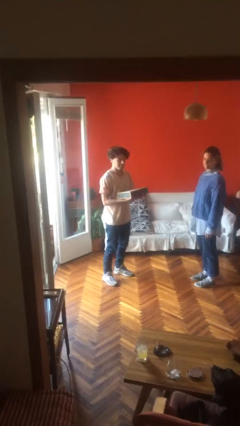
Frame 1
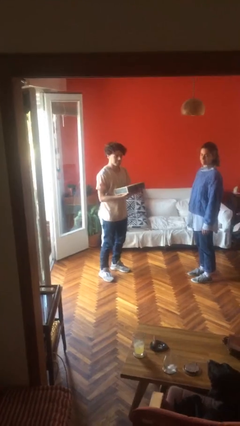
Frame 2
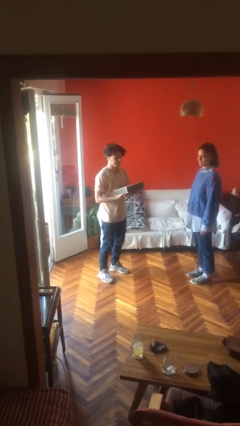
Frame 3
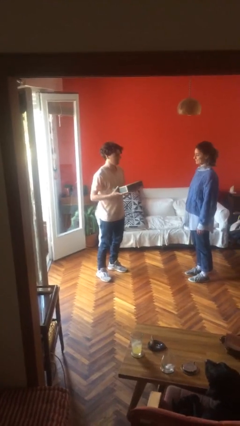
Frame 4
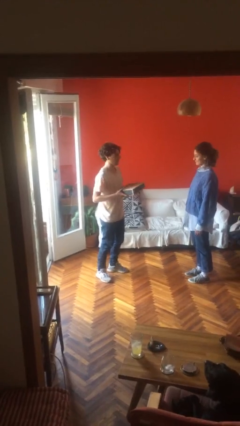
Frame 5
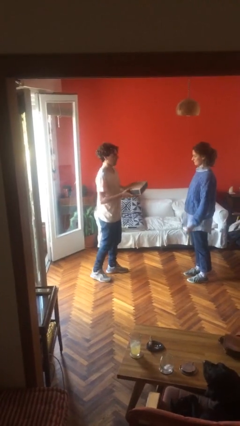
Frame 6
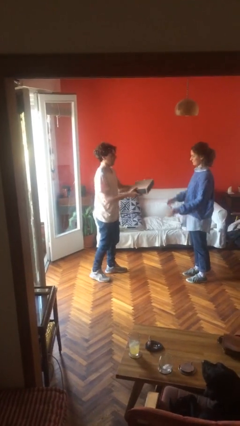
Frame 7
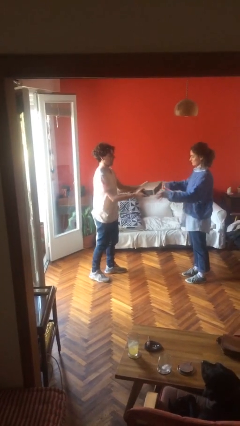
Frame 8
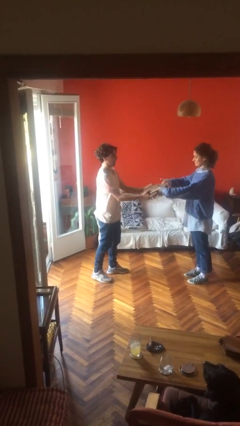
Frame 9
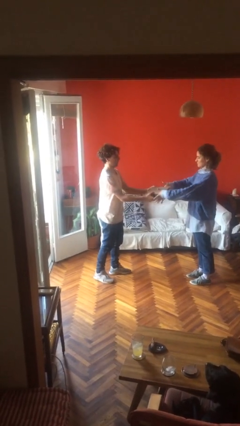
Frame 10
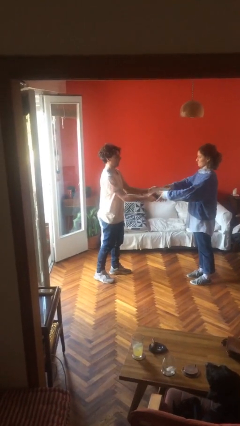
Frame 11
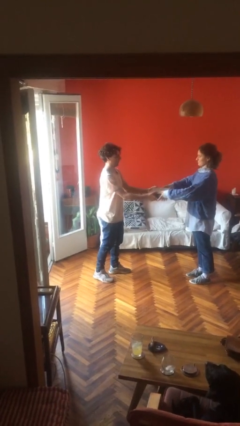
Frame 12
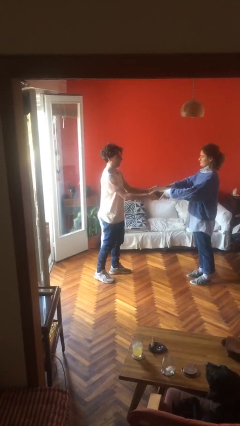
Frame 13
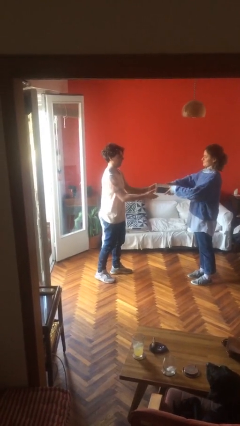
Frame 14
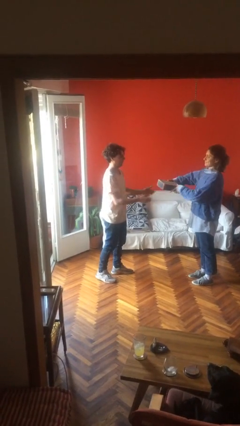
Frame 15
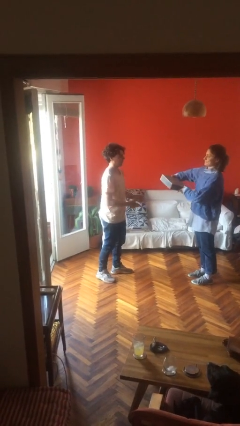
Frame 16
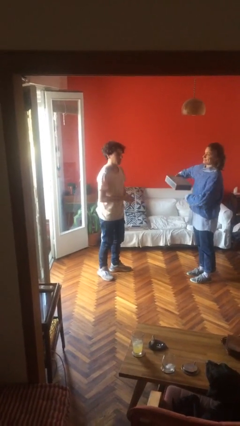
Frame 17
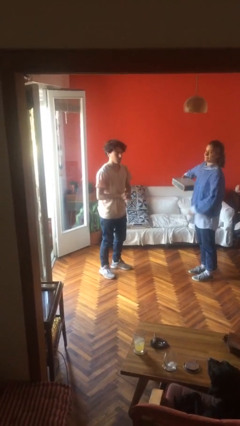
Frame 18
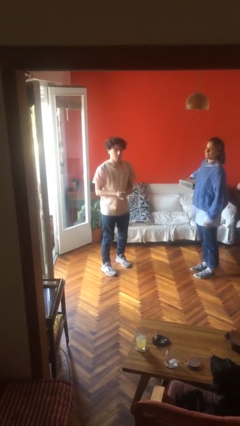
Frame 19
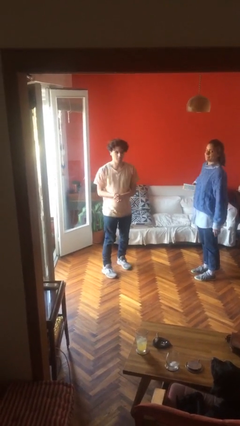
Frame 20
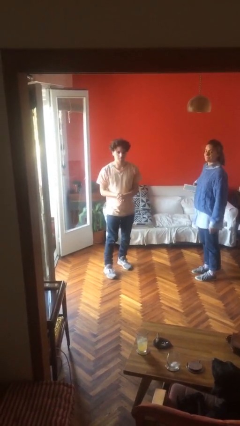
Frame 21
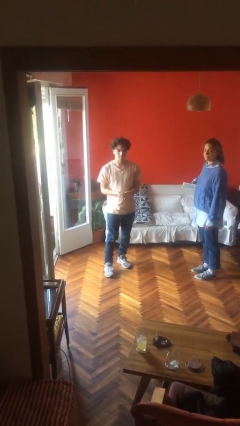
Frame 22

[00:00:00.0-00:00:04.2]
person transfers object to person

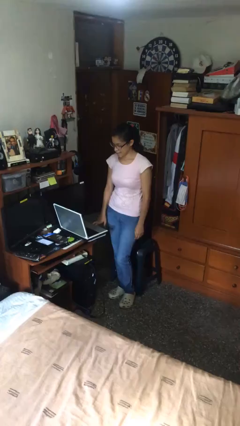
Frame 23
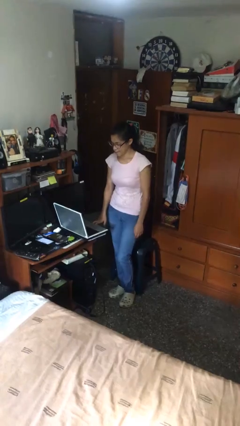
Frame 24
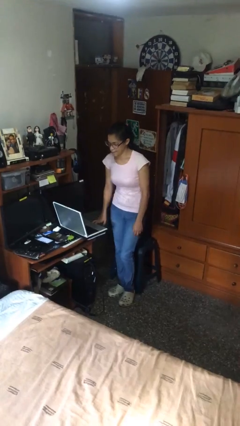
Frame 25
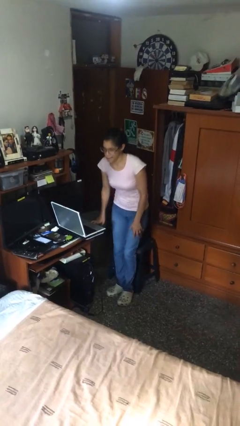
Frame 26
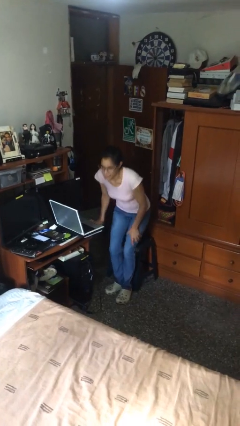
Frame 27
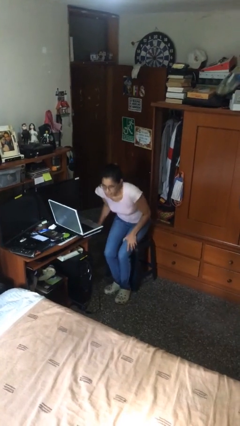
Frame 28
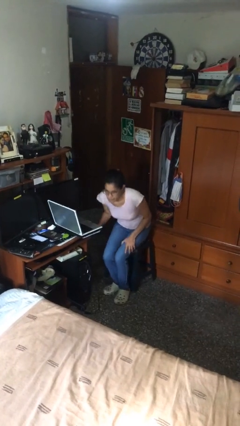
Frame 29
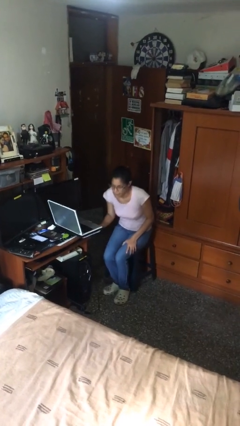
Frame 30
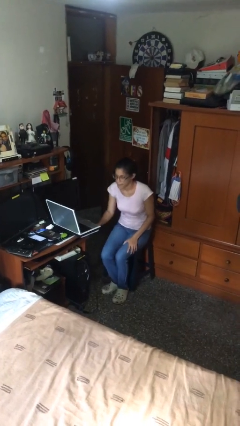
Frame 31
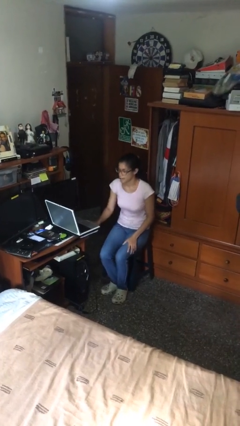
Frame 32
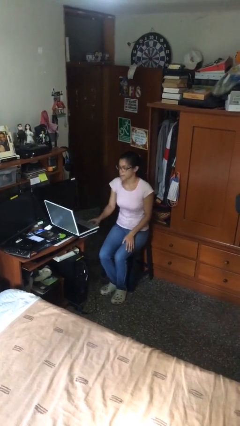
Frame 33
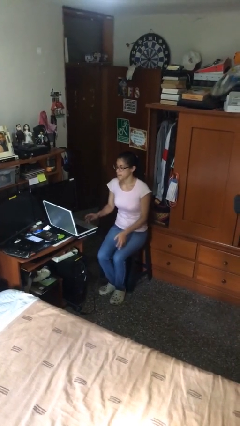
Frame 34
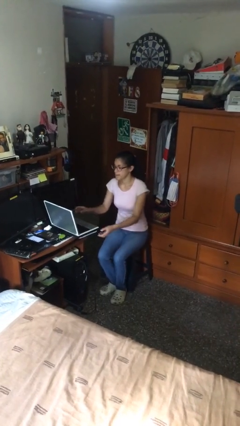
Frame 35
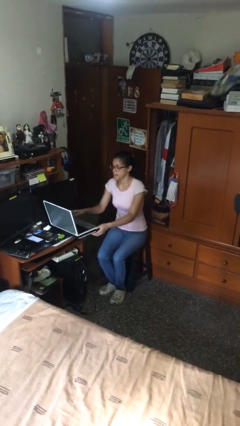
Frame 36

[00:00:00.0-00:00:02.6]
person sits down

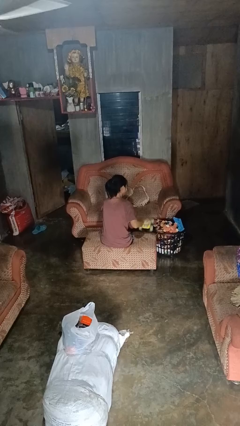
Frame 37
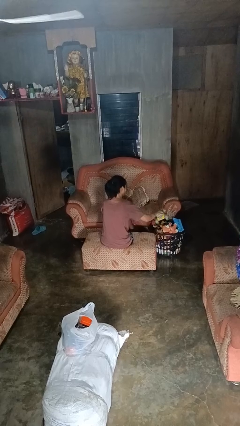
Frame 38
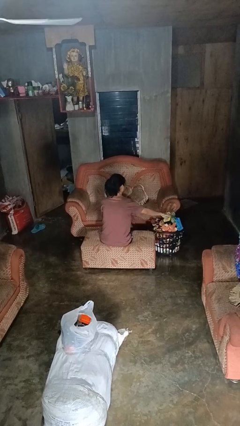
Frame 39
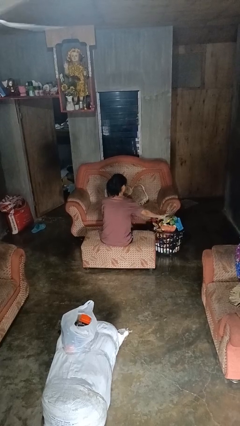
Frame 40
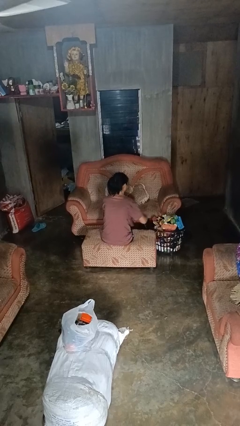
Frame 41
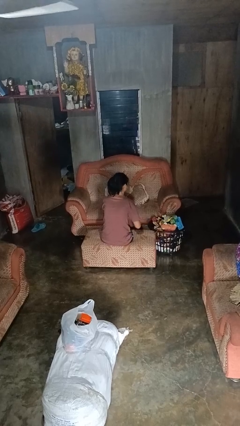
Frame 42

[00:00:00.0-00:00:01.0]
person puts object into basket

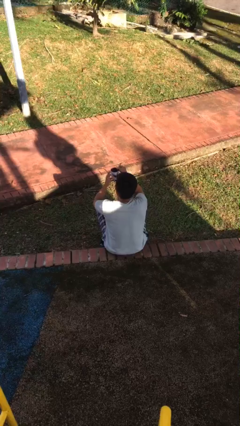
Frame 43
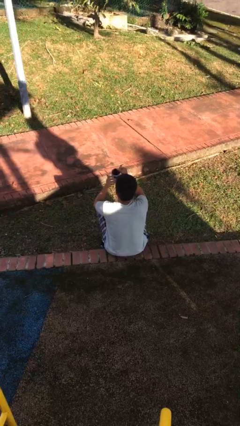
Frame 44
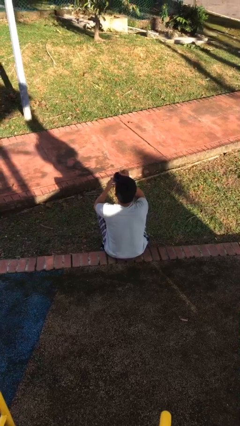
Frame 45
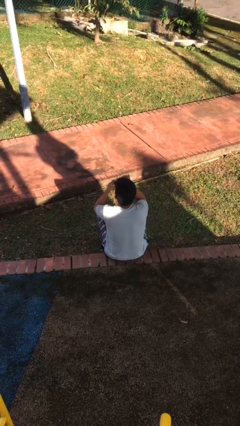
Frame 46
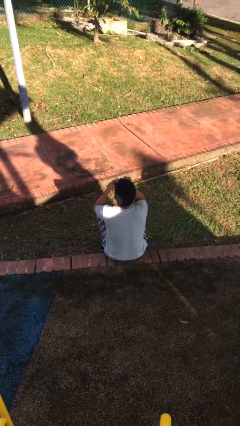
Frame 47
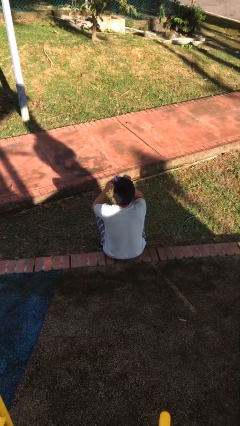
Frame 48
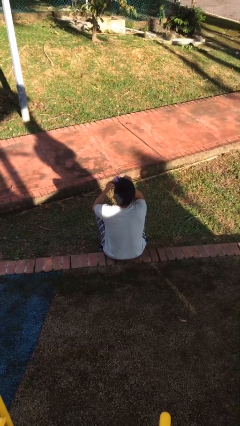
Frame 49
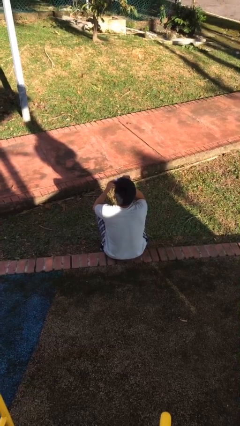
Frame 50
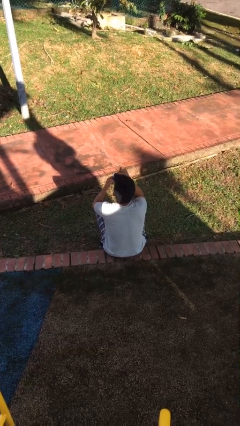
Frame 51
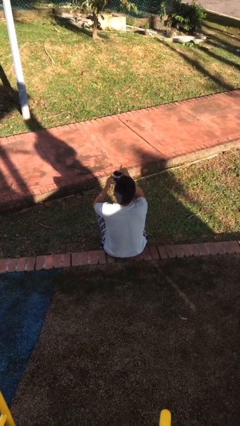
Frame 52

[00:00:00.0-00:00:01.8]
person drinks from mug

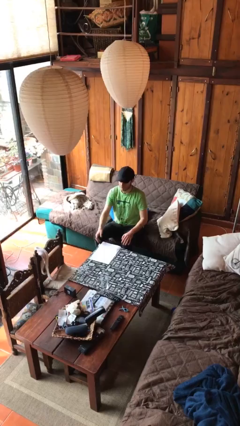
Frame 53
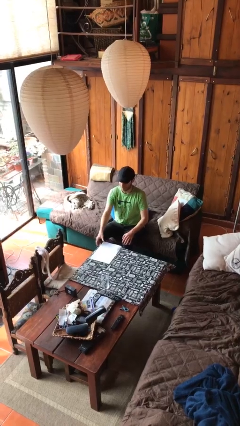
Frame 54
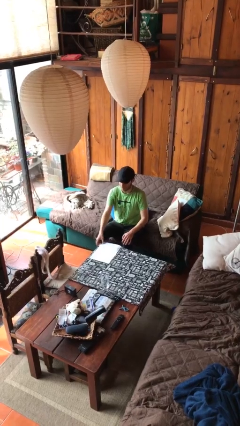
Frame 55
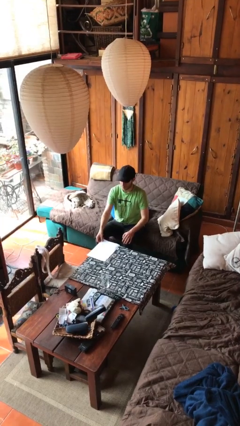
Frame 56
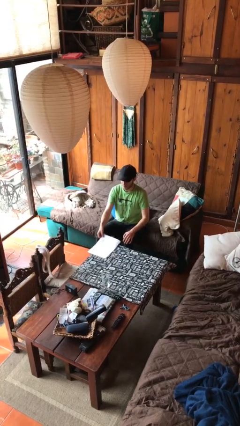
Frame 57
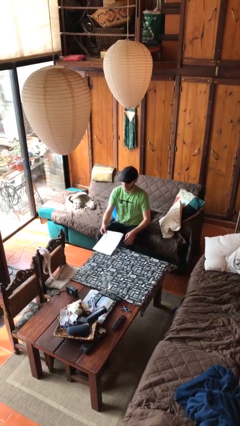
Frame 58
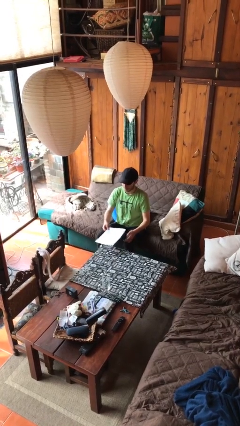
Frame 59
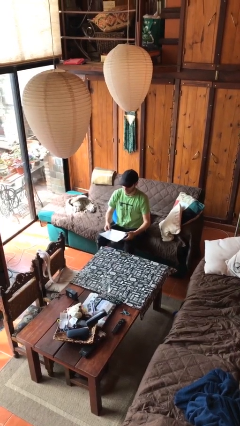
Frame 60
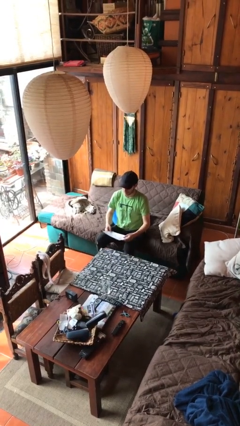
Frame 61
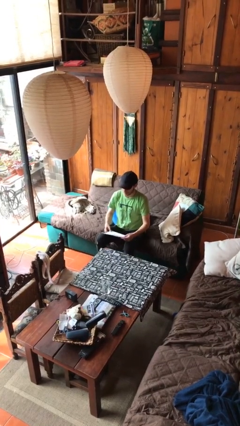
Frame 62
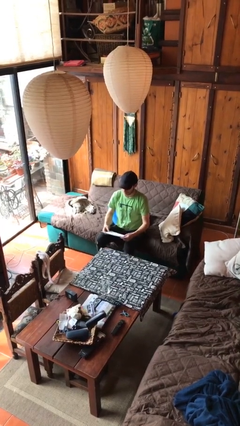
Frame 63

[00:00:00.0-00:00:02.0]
person picks up object from table

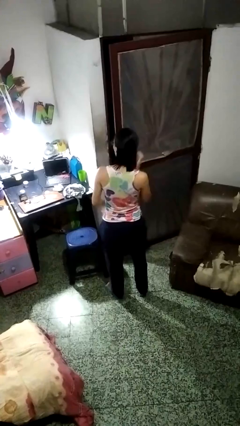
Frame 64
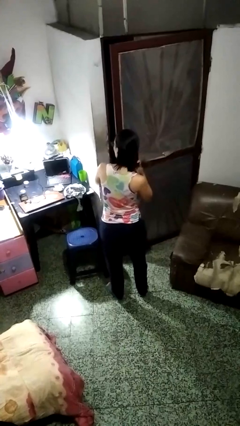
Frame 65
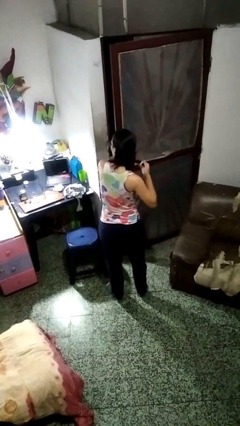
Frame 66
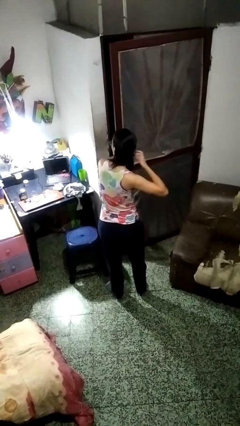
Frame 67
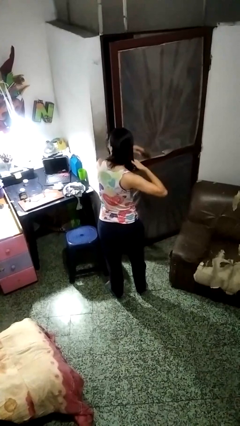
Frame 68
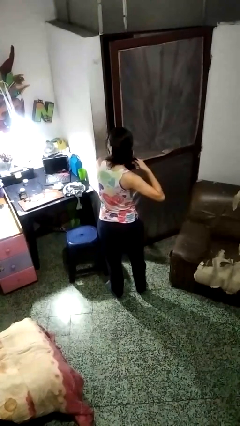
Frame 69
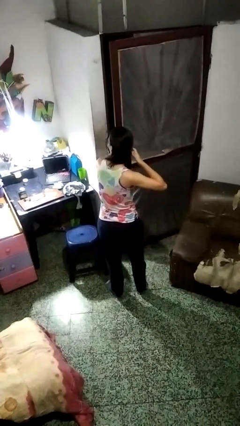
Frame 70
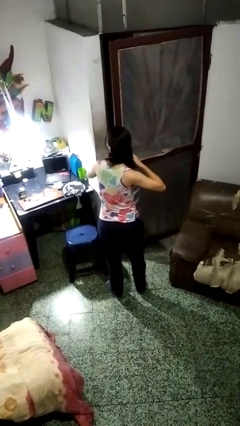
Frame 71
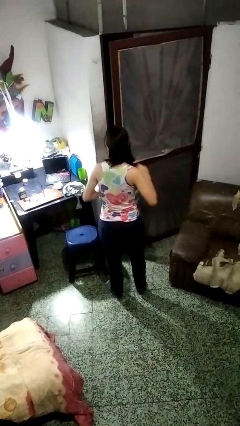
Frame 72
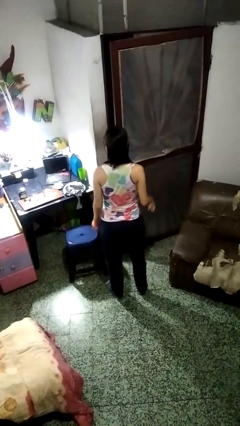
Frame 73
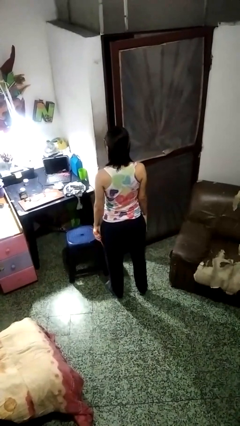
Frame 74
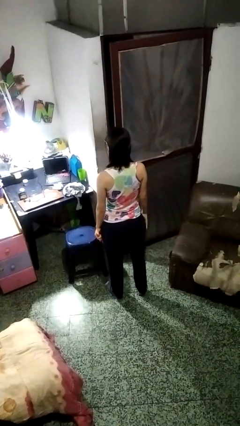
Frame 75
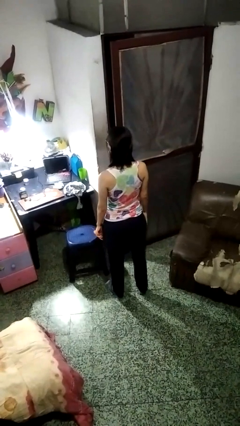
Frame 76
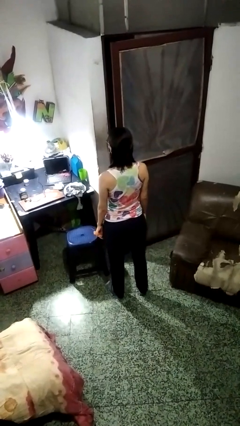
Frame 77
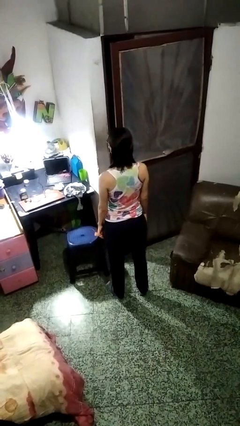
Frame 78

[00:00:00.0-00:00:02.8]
person brushes hair

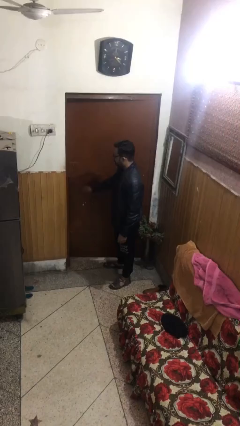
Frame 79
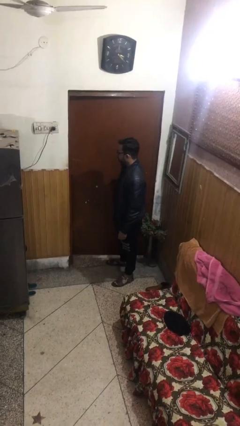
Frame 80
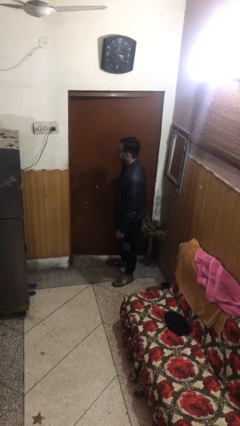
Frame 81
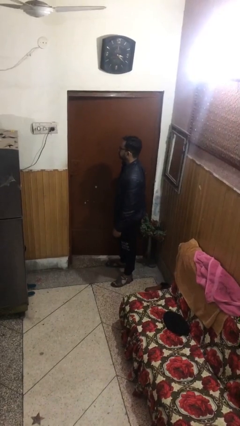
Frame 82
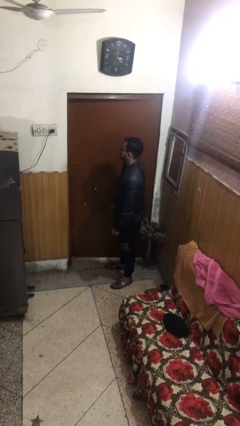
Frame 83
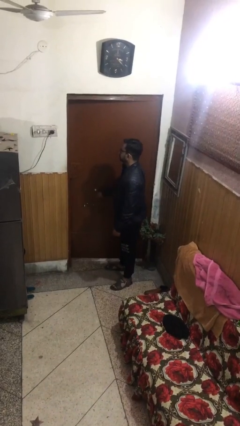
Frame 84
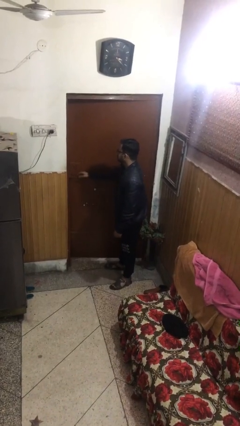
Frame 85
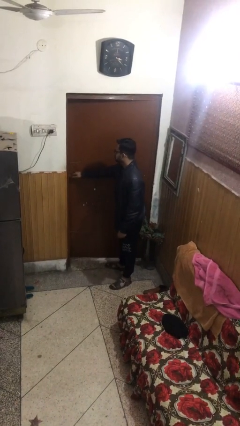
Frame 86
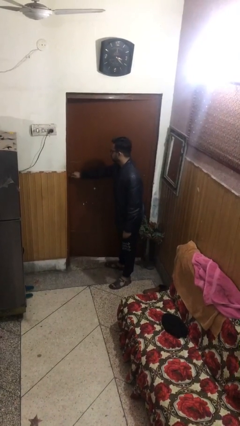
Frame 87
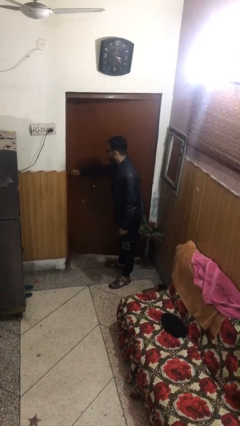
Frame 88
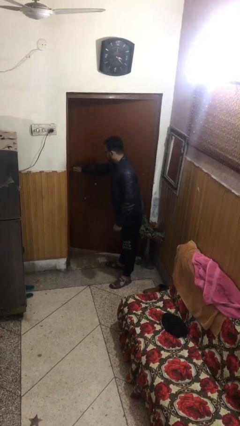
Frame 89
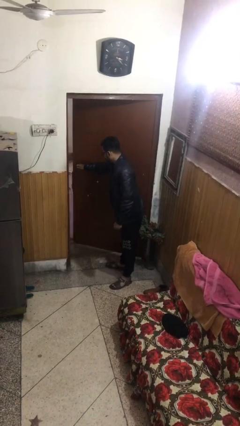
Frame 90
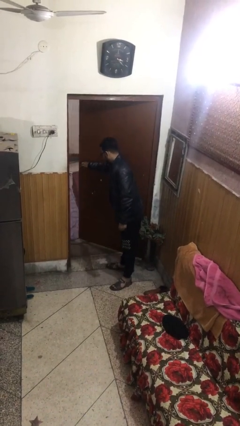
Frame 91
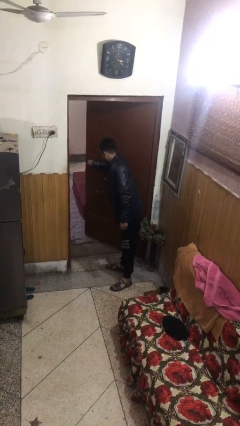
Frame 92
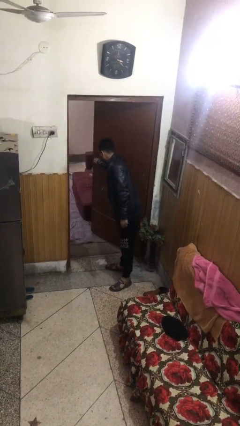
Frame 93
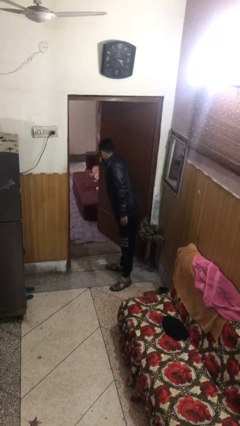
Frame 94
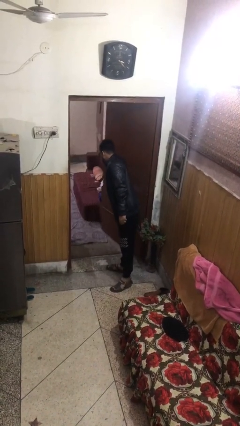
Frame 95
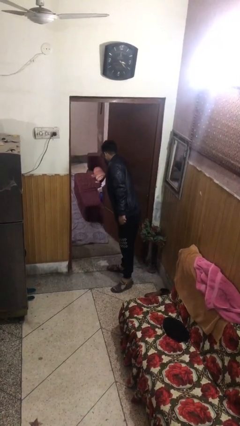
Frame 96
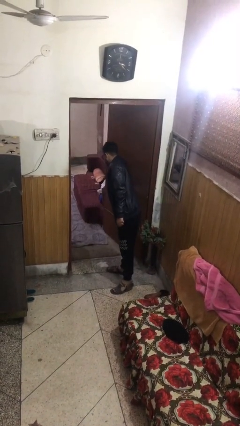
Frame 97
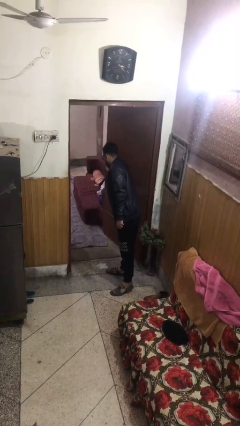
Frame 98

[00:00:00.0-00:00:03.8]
person opens facility door
